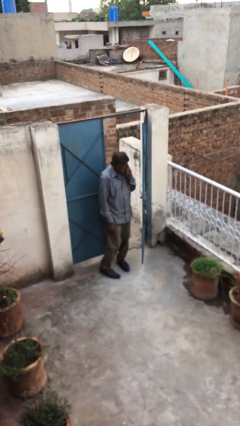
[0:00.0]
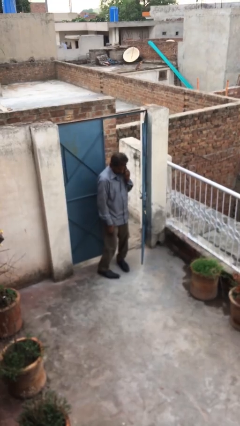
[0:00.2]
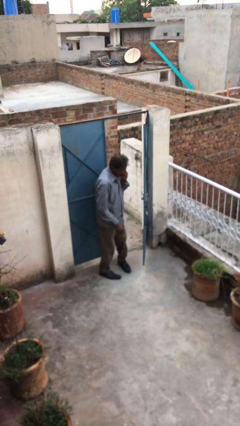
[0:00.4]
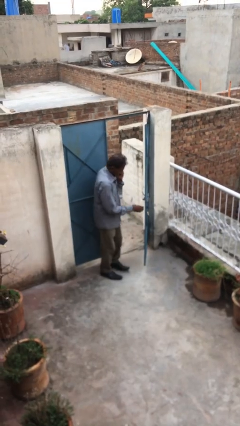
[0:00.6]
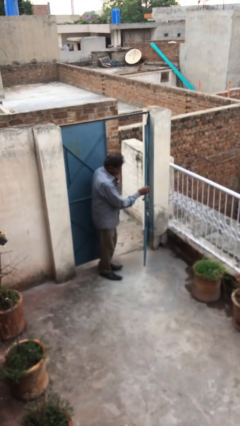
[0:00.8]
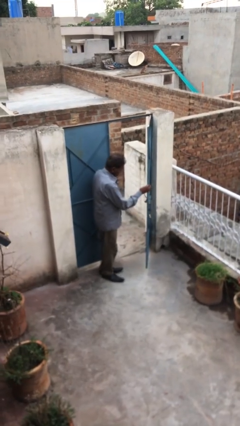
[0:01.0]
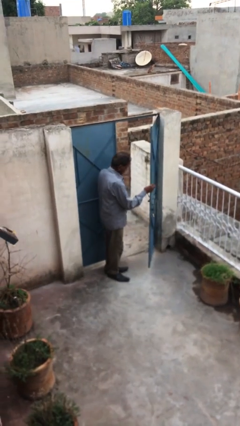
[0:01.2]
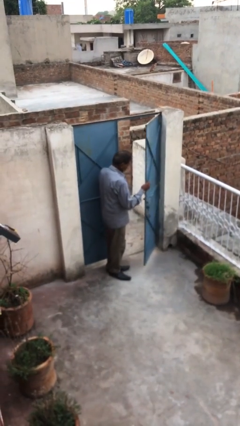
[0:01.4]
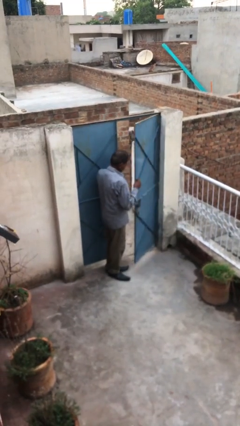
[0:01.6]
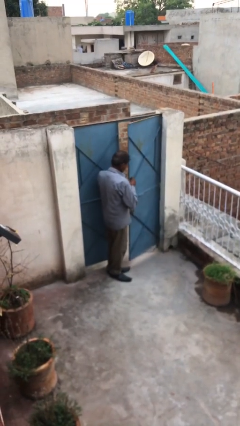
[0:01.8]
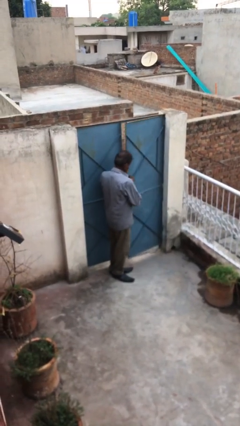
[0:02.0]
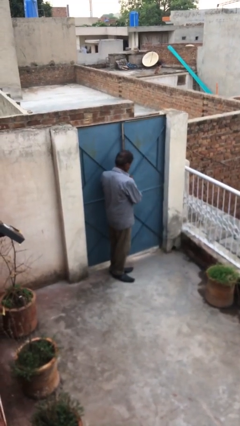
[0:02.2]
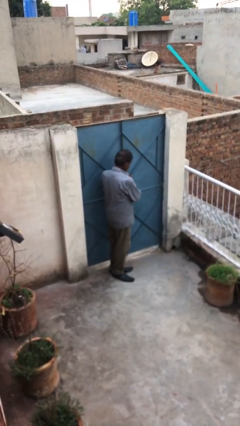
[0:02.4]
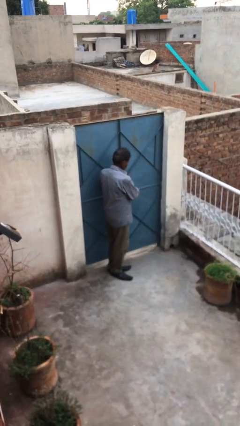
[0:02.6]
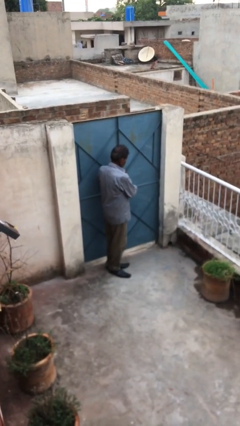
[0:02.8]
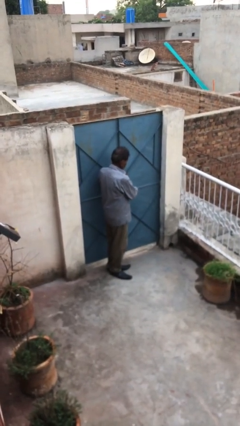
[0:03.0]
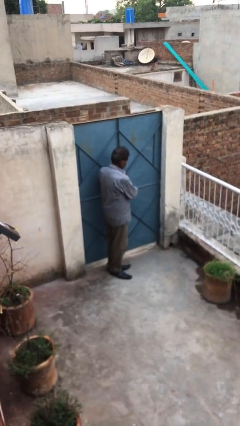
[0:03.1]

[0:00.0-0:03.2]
person closes facility door

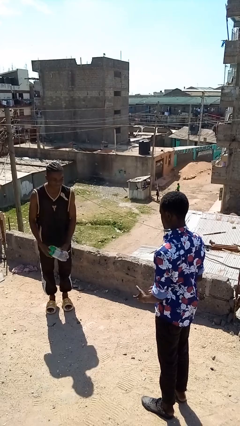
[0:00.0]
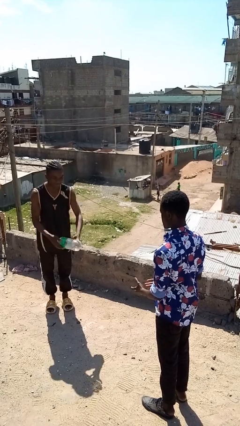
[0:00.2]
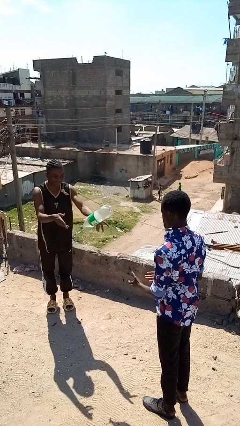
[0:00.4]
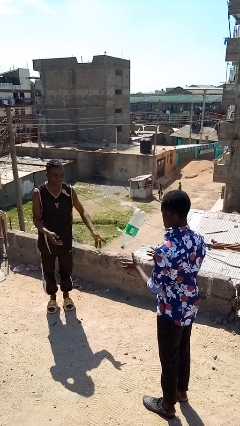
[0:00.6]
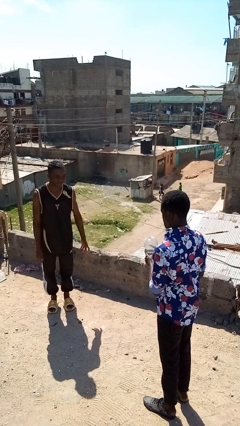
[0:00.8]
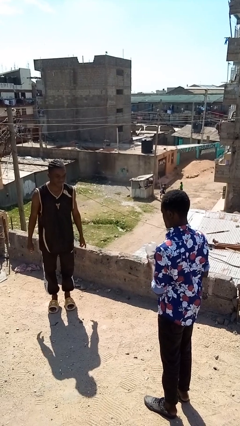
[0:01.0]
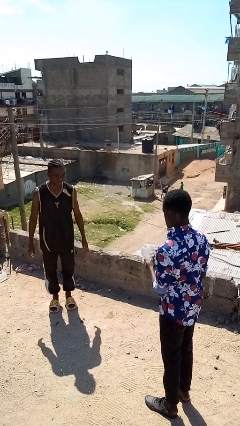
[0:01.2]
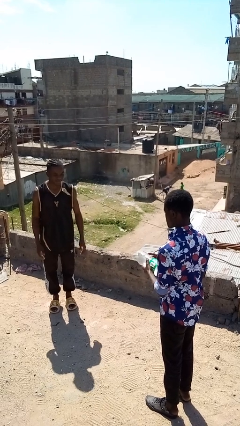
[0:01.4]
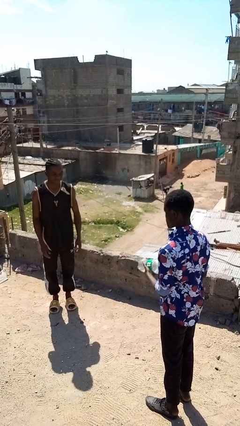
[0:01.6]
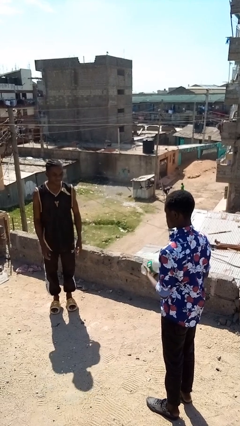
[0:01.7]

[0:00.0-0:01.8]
person catches object from person

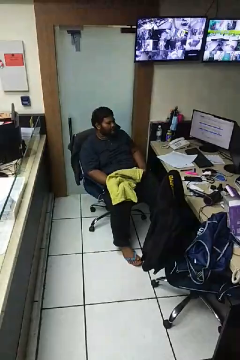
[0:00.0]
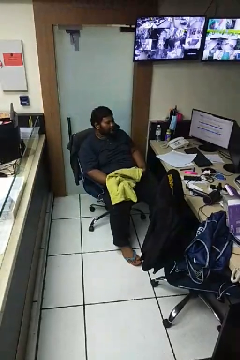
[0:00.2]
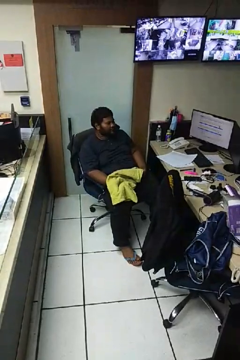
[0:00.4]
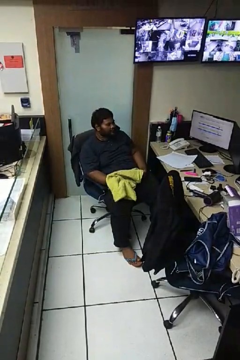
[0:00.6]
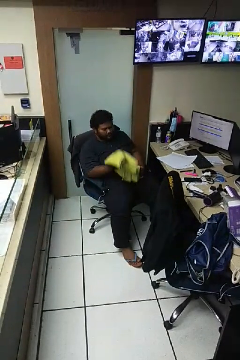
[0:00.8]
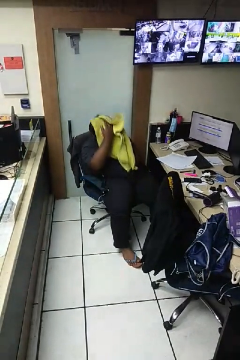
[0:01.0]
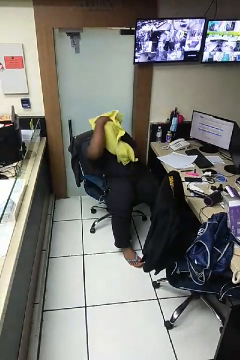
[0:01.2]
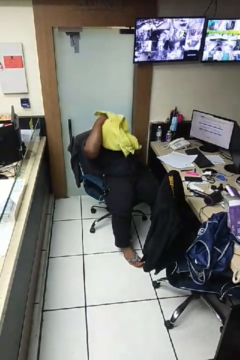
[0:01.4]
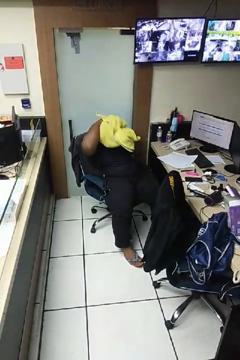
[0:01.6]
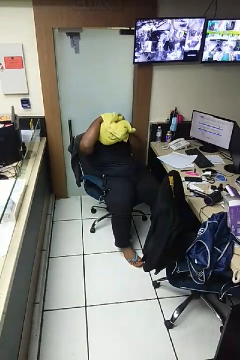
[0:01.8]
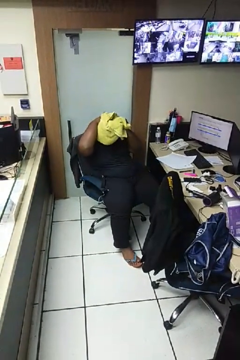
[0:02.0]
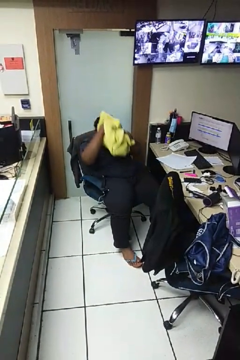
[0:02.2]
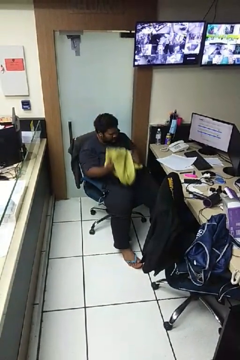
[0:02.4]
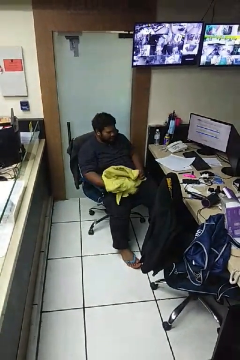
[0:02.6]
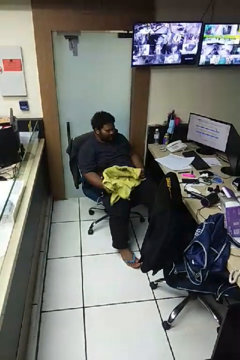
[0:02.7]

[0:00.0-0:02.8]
person dries hair with towel

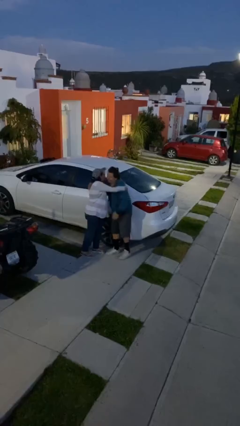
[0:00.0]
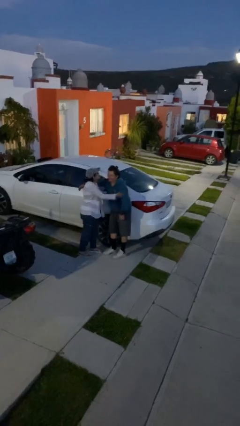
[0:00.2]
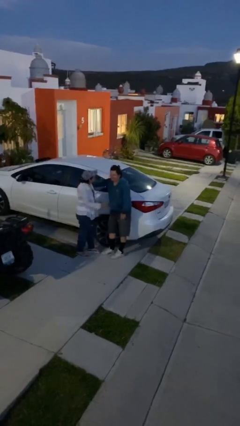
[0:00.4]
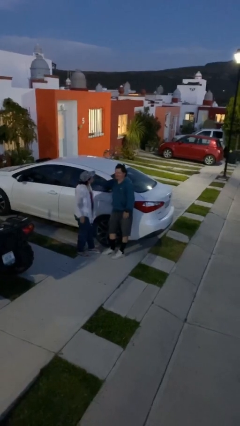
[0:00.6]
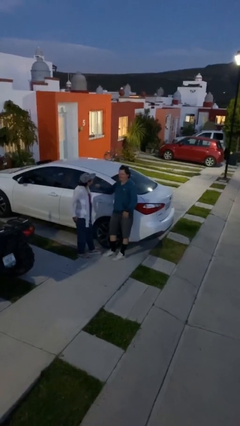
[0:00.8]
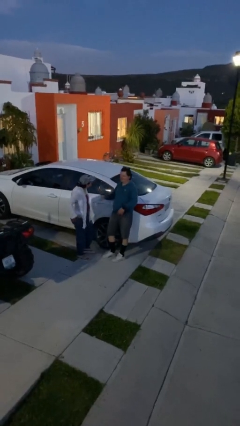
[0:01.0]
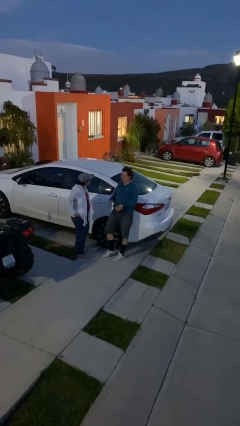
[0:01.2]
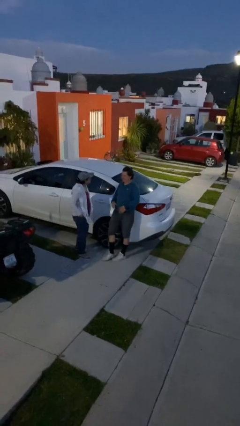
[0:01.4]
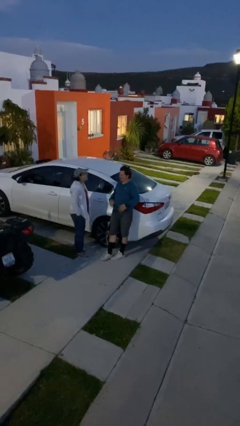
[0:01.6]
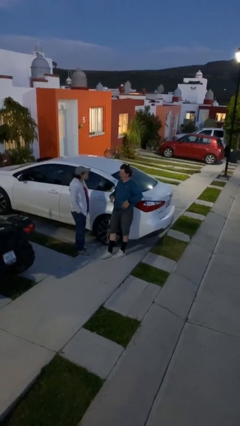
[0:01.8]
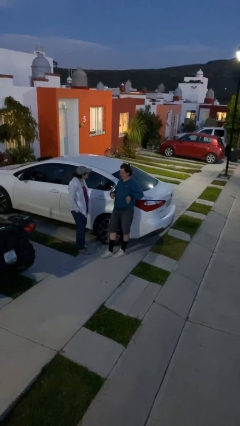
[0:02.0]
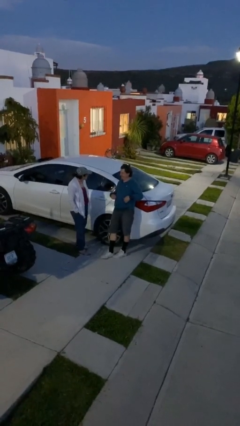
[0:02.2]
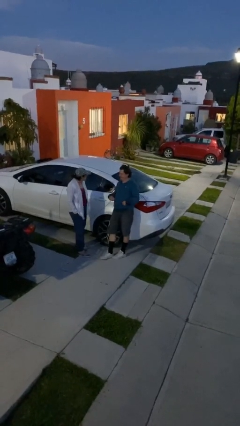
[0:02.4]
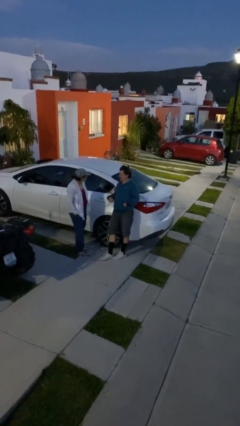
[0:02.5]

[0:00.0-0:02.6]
person talks to person

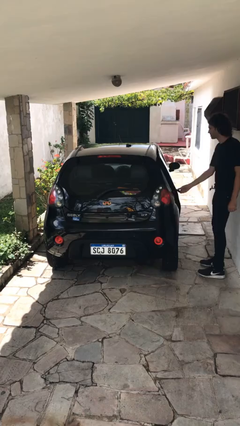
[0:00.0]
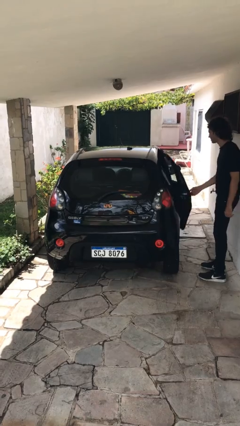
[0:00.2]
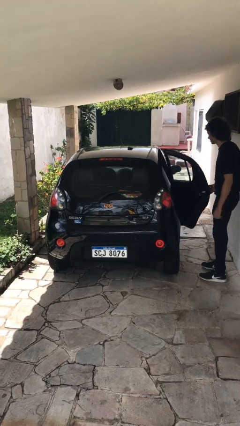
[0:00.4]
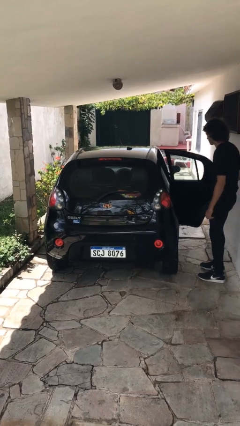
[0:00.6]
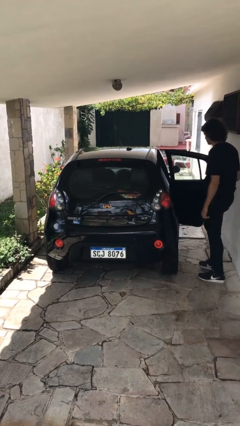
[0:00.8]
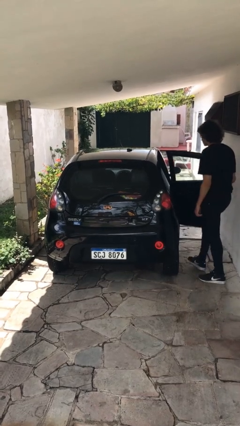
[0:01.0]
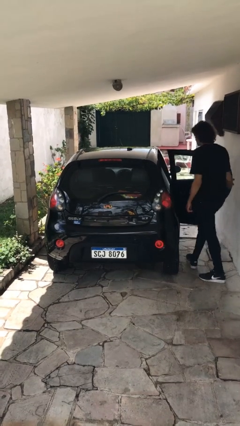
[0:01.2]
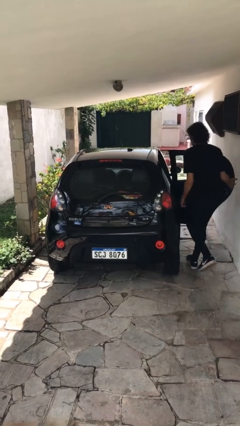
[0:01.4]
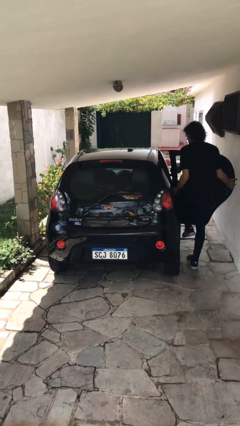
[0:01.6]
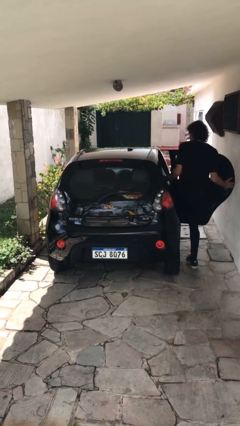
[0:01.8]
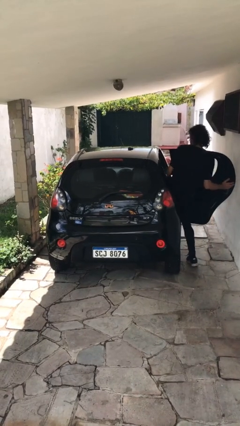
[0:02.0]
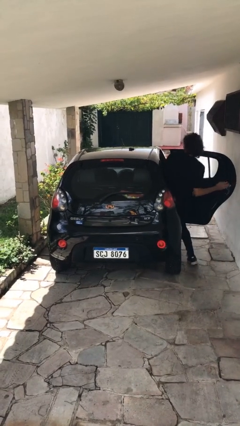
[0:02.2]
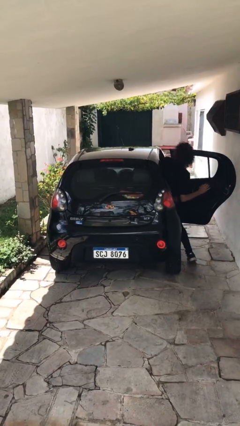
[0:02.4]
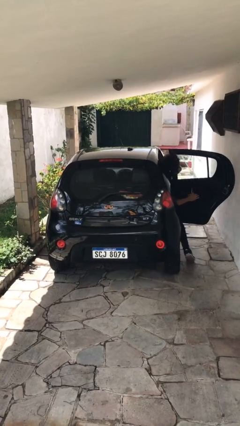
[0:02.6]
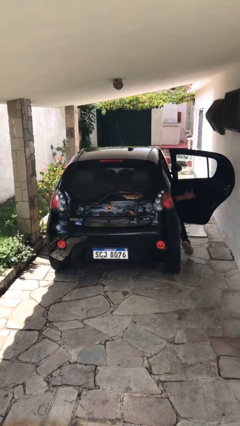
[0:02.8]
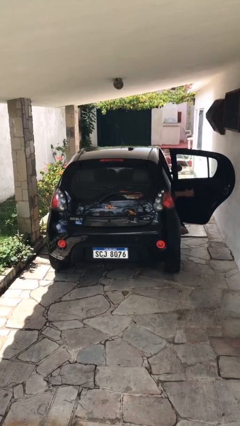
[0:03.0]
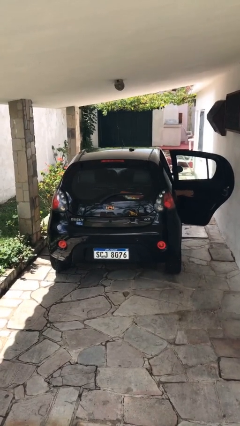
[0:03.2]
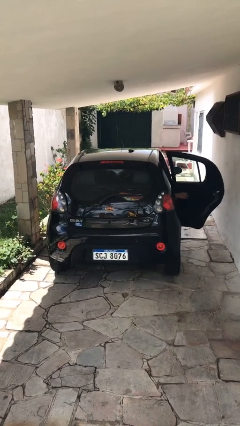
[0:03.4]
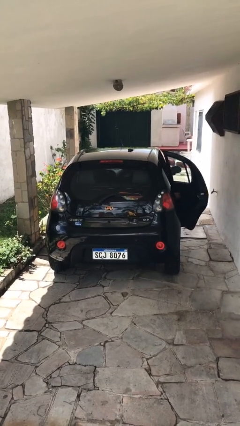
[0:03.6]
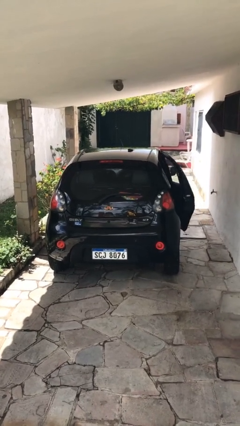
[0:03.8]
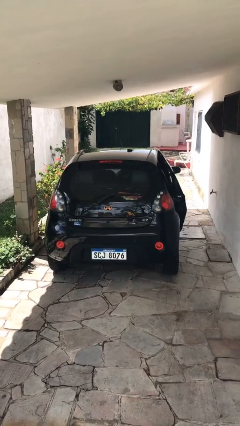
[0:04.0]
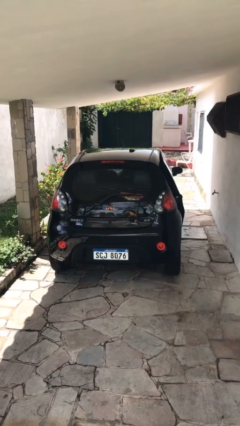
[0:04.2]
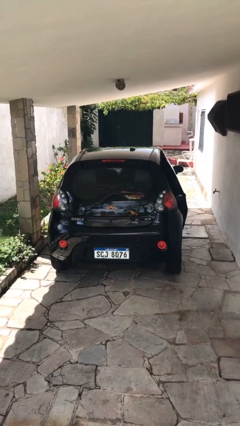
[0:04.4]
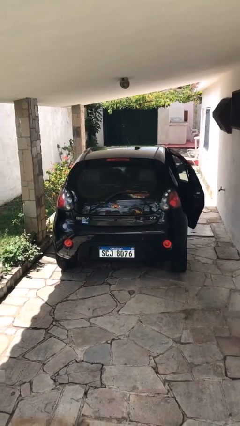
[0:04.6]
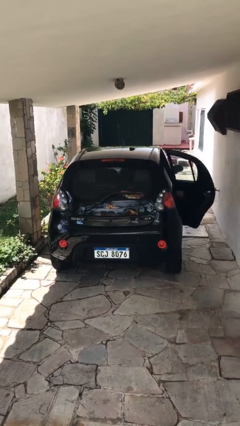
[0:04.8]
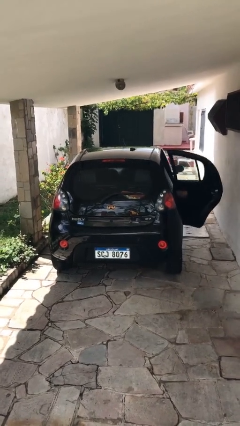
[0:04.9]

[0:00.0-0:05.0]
car picks up person

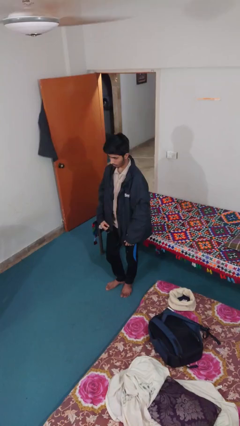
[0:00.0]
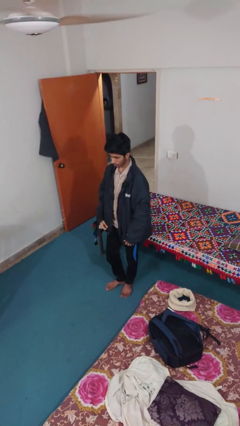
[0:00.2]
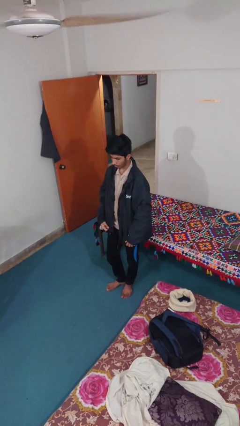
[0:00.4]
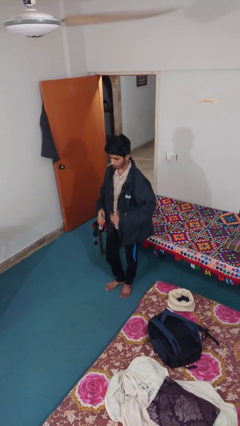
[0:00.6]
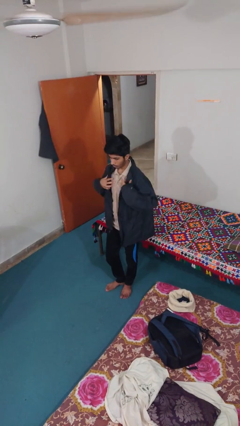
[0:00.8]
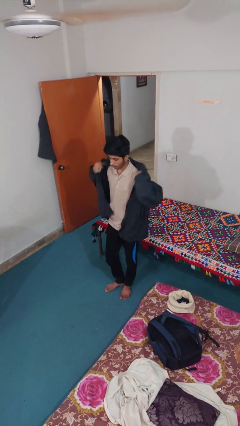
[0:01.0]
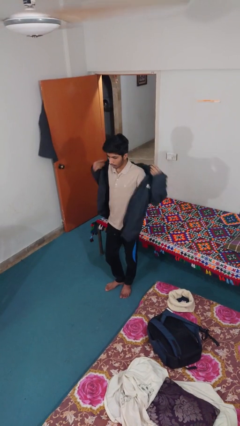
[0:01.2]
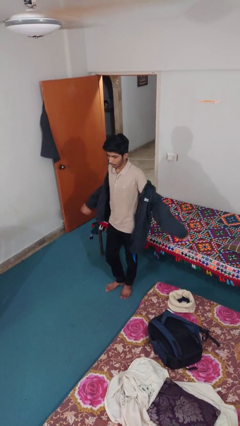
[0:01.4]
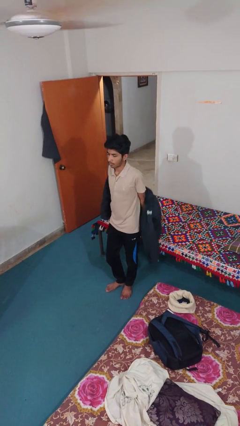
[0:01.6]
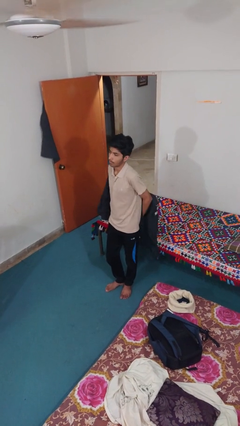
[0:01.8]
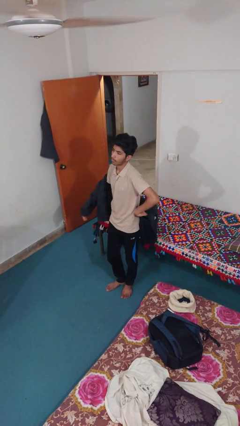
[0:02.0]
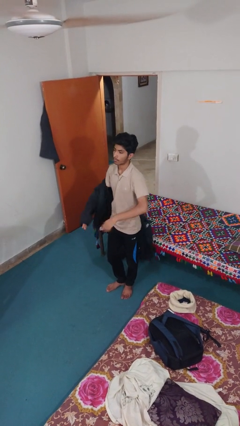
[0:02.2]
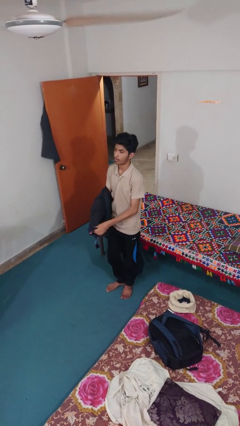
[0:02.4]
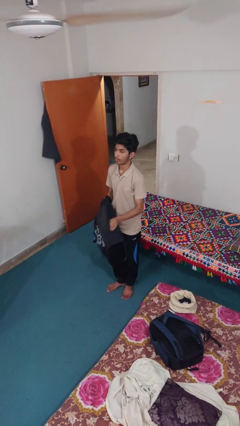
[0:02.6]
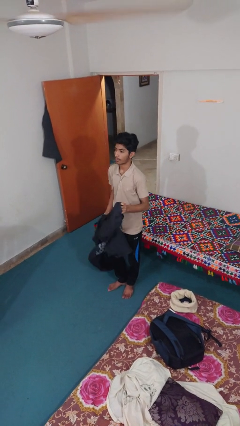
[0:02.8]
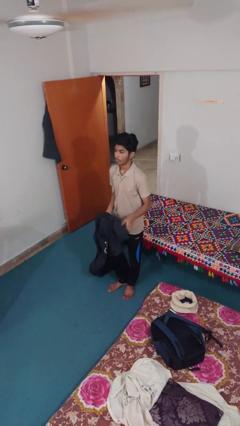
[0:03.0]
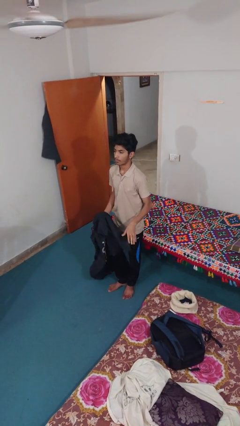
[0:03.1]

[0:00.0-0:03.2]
person takes off jacket
